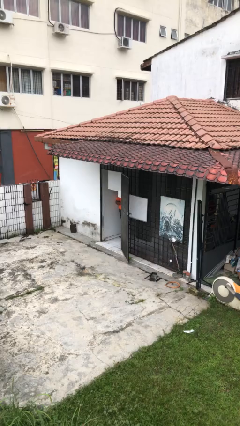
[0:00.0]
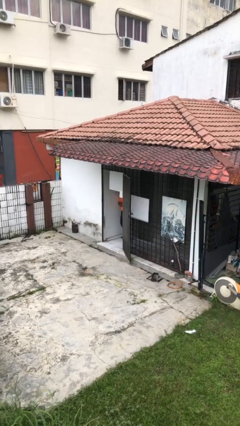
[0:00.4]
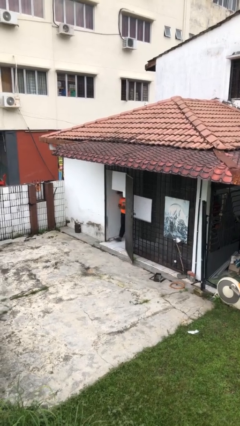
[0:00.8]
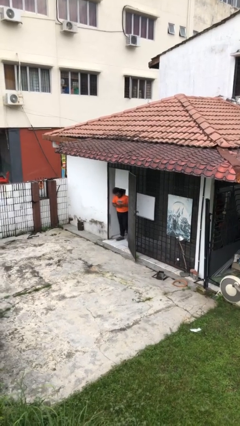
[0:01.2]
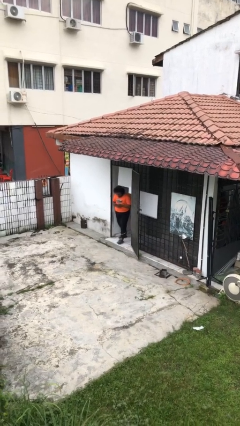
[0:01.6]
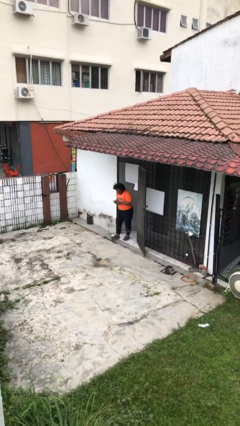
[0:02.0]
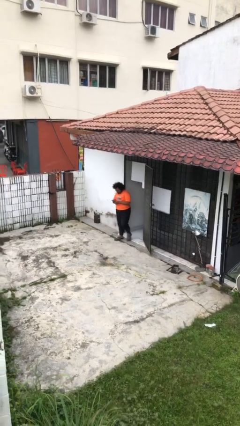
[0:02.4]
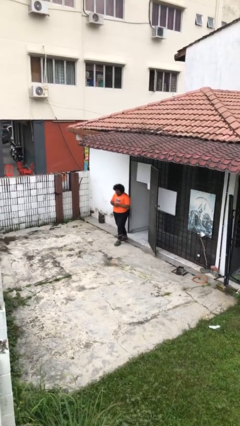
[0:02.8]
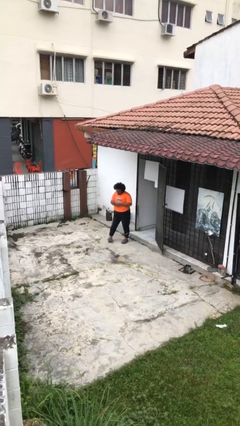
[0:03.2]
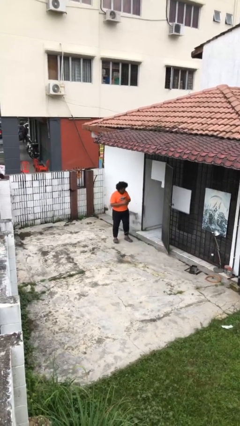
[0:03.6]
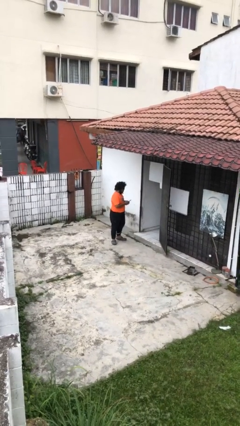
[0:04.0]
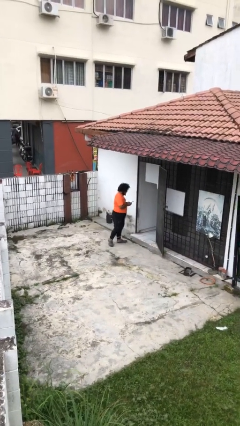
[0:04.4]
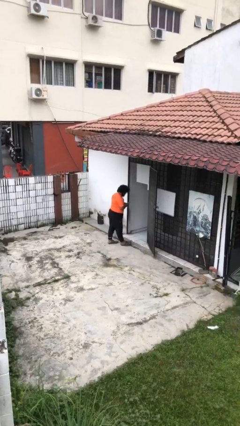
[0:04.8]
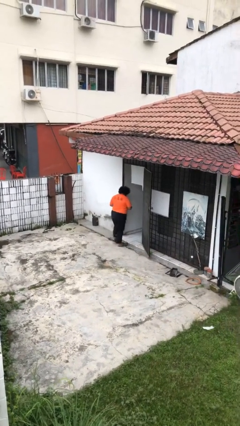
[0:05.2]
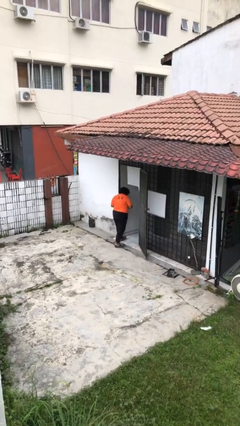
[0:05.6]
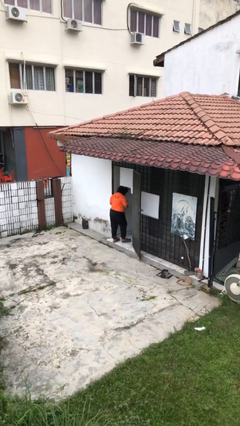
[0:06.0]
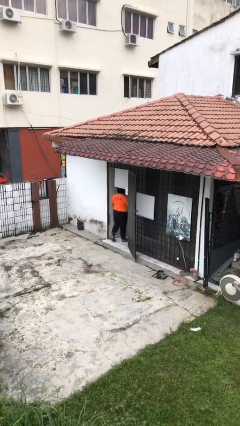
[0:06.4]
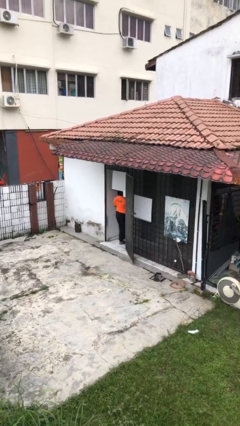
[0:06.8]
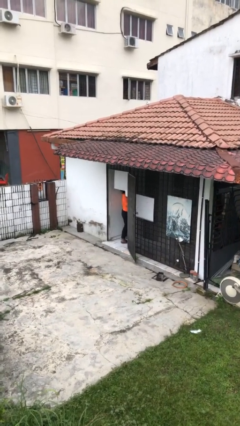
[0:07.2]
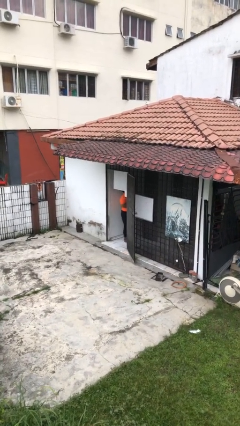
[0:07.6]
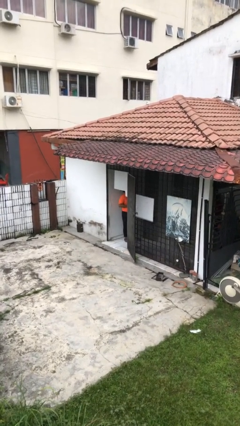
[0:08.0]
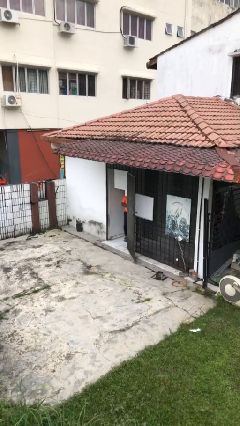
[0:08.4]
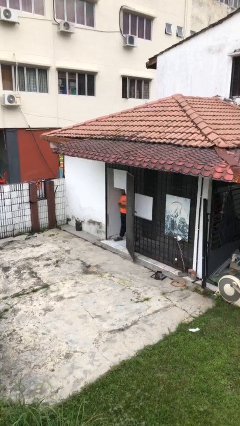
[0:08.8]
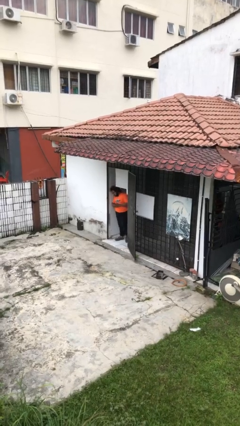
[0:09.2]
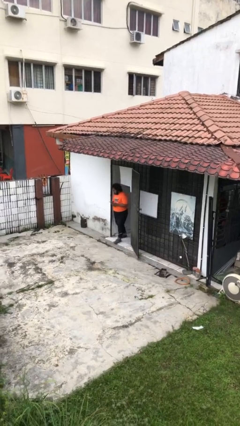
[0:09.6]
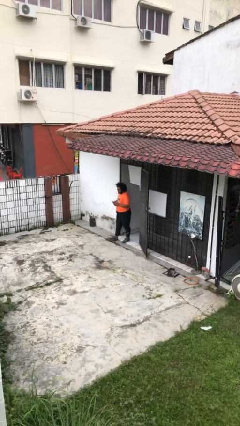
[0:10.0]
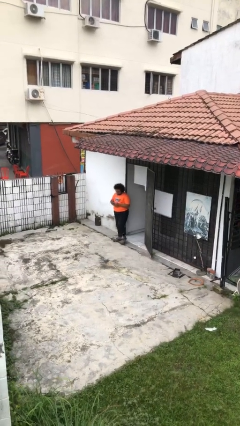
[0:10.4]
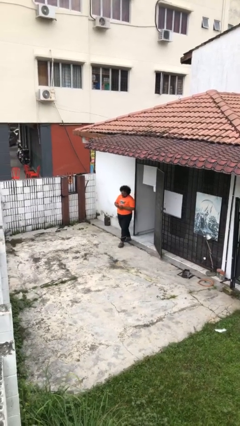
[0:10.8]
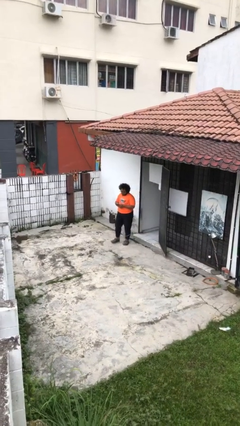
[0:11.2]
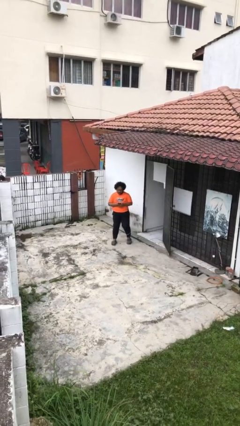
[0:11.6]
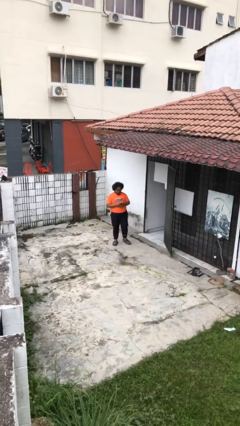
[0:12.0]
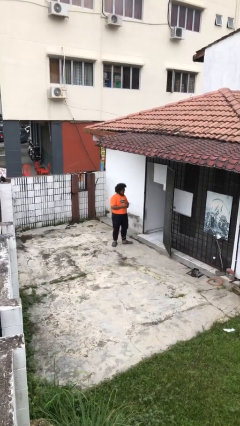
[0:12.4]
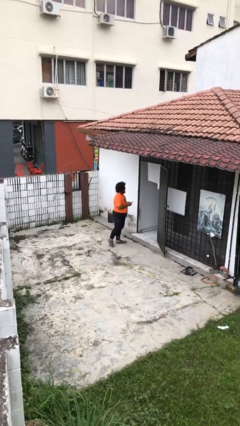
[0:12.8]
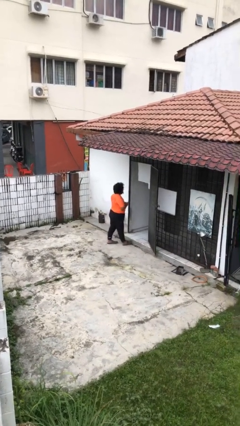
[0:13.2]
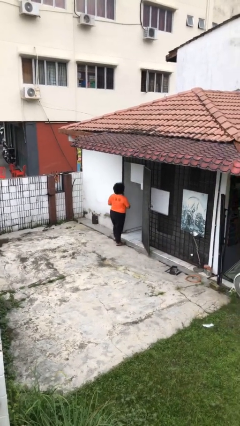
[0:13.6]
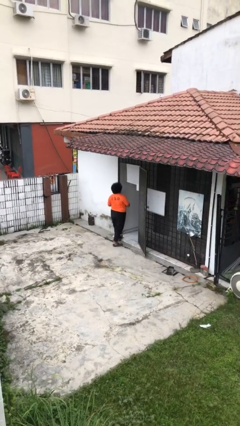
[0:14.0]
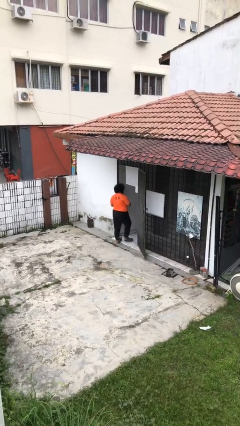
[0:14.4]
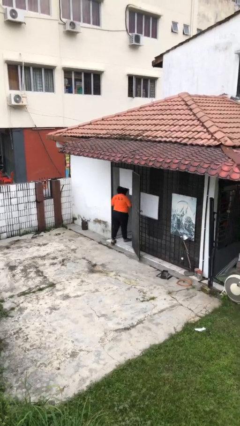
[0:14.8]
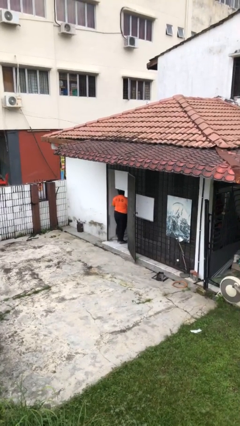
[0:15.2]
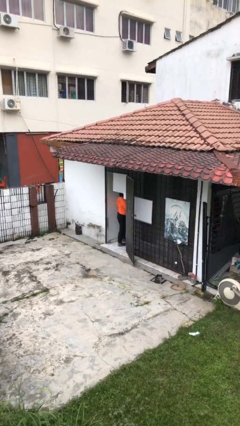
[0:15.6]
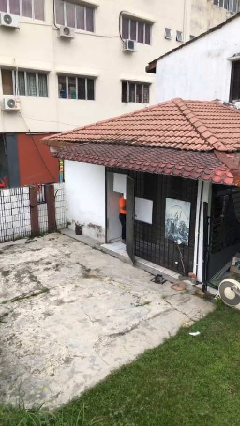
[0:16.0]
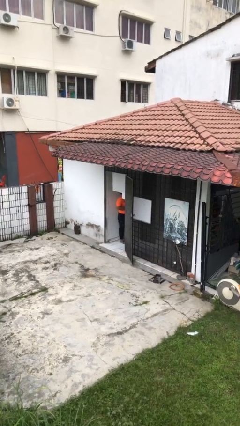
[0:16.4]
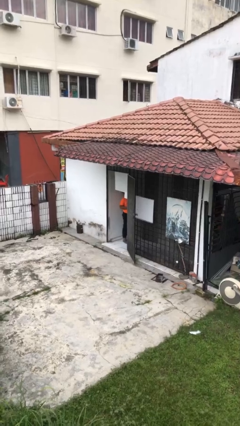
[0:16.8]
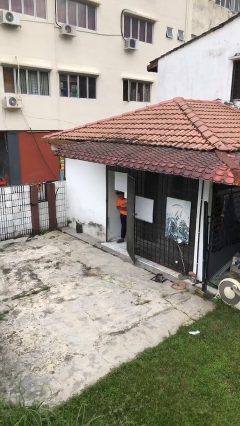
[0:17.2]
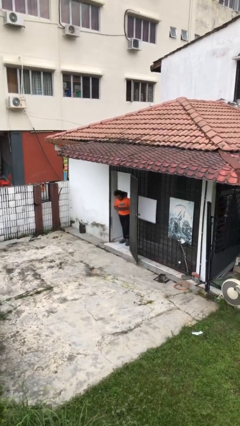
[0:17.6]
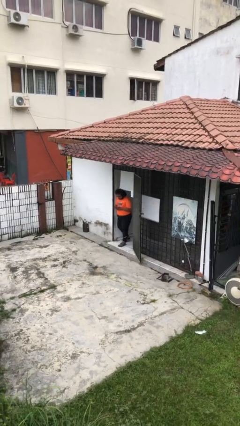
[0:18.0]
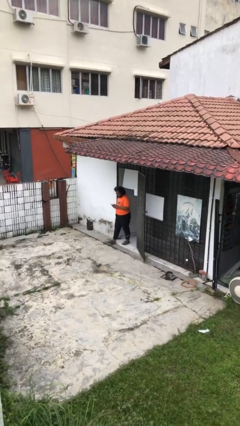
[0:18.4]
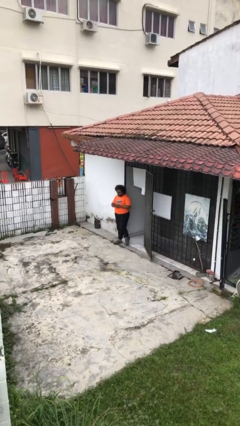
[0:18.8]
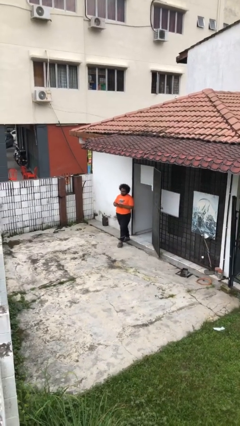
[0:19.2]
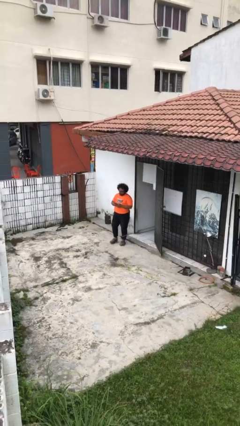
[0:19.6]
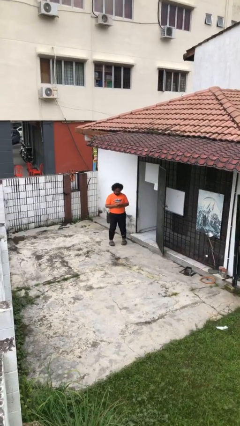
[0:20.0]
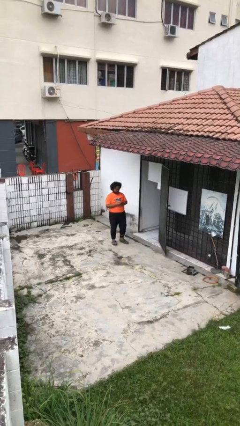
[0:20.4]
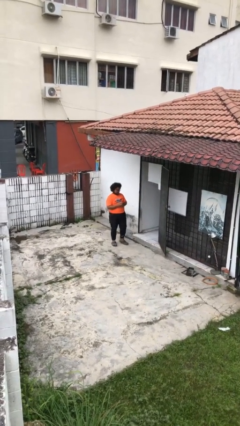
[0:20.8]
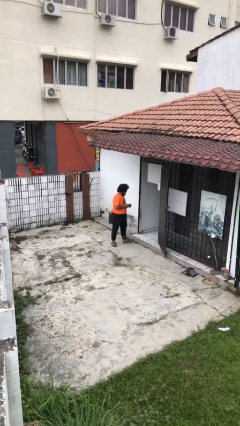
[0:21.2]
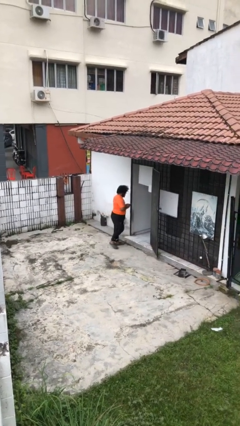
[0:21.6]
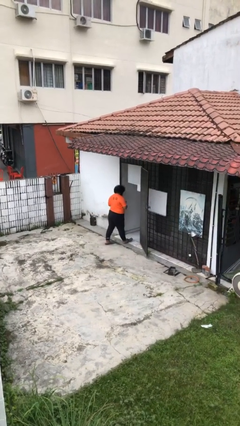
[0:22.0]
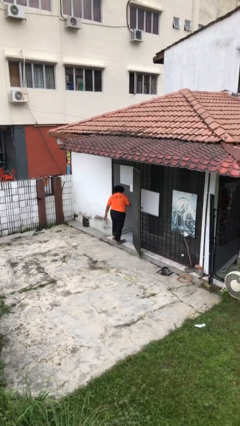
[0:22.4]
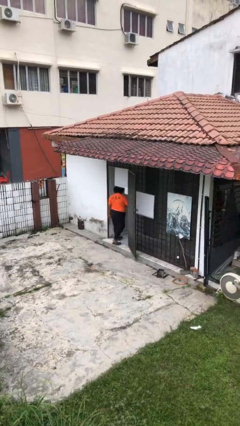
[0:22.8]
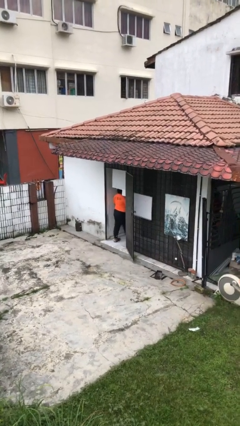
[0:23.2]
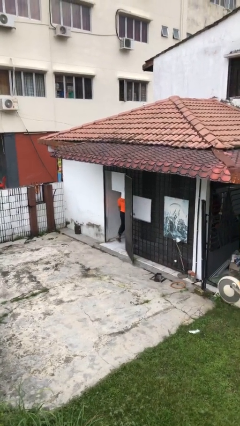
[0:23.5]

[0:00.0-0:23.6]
person texts on phone

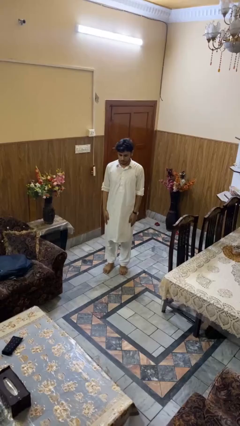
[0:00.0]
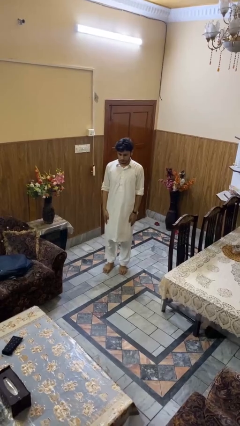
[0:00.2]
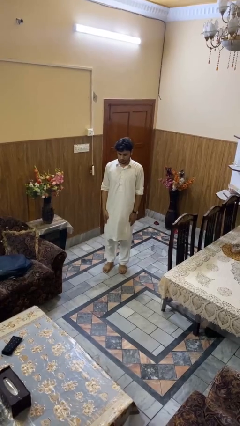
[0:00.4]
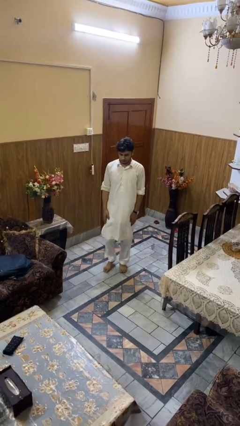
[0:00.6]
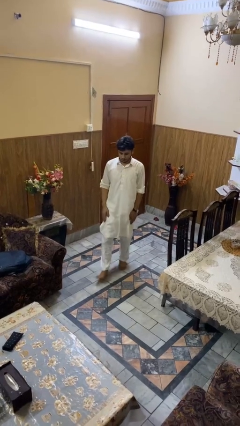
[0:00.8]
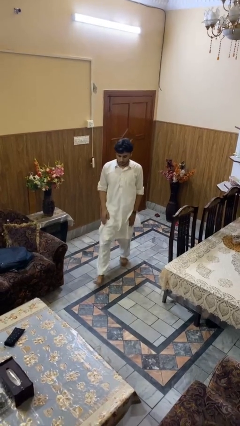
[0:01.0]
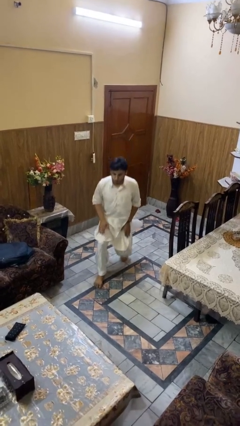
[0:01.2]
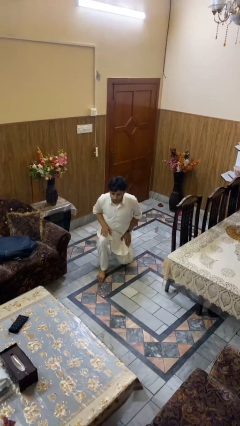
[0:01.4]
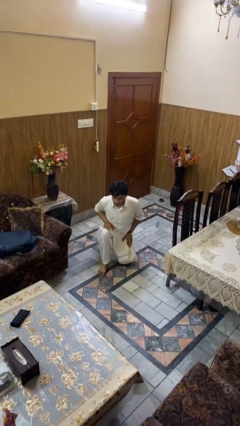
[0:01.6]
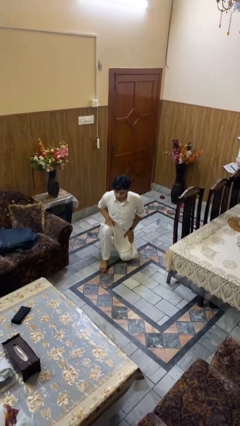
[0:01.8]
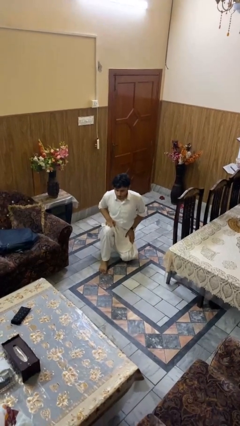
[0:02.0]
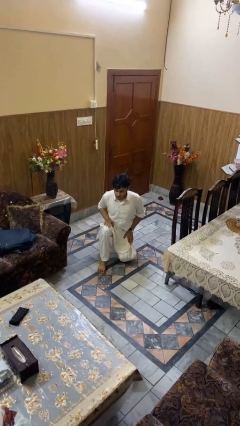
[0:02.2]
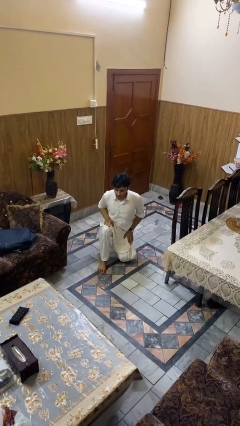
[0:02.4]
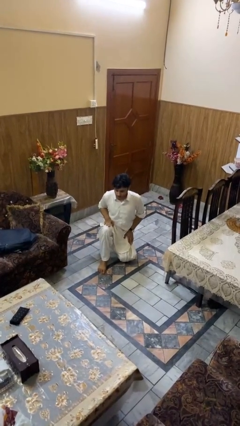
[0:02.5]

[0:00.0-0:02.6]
person kneels

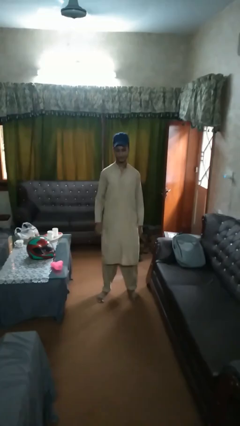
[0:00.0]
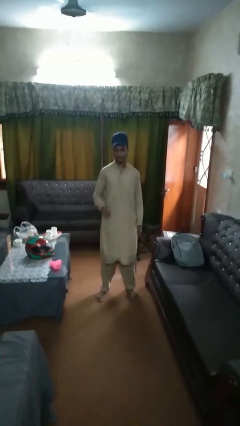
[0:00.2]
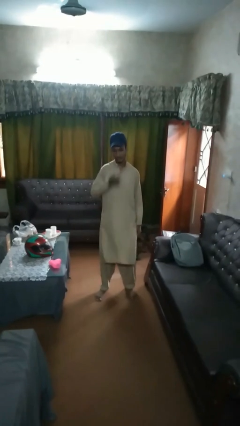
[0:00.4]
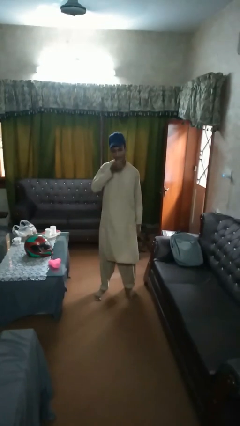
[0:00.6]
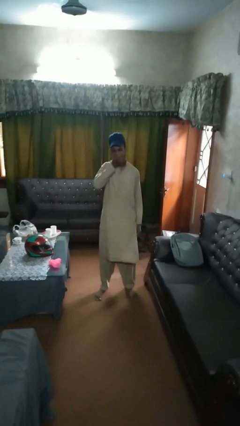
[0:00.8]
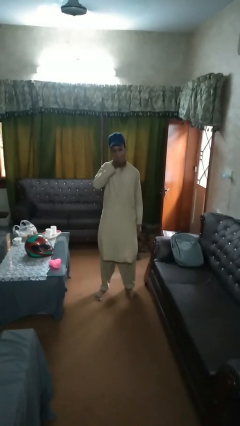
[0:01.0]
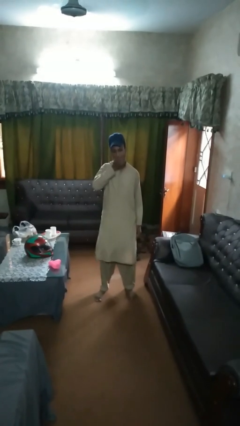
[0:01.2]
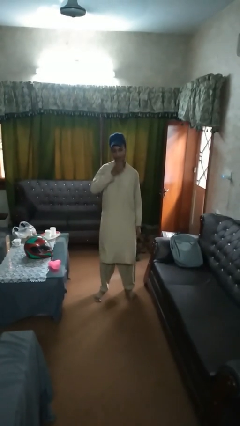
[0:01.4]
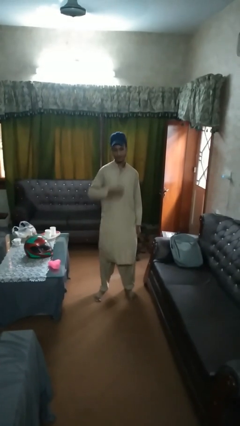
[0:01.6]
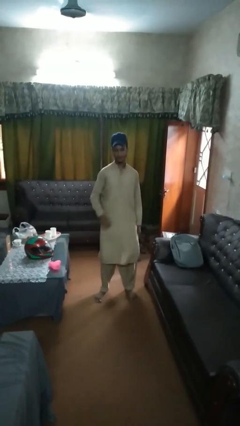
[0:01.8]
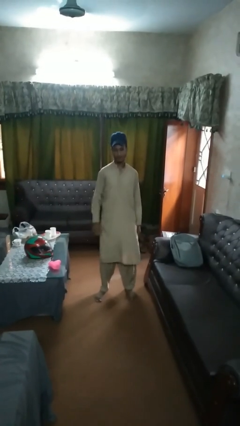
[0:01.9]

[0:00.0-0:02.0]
person eats apple

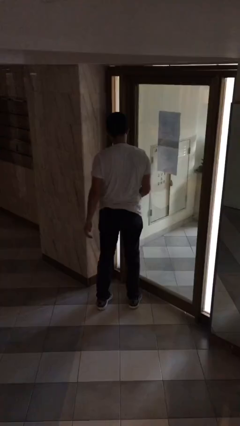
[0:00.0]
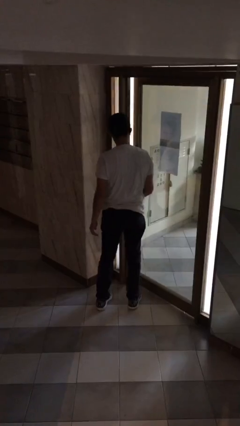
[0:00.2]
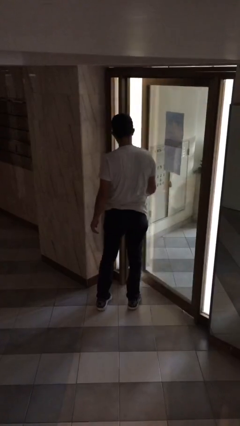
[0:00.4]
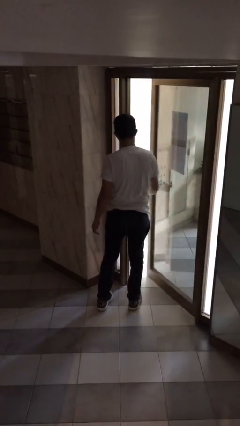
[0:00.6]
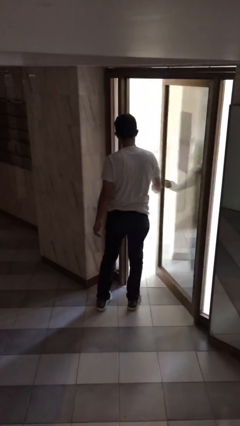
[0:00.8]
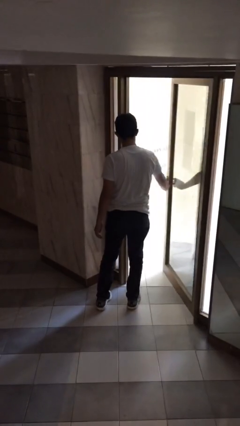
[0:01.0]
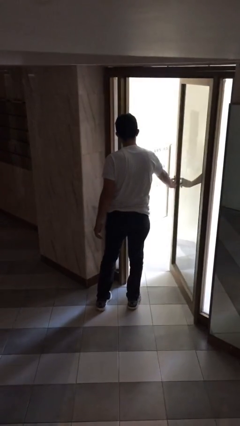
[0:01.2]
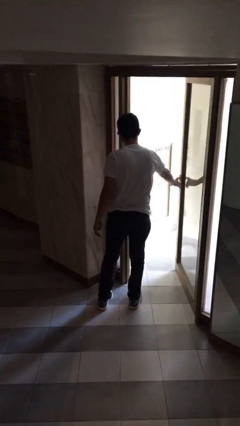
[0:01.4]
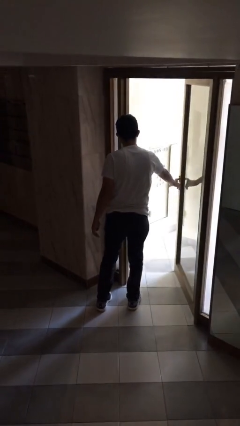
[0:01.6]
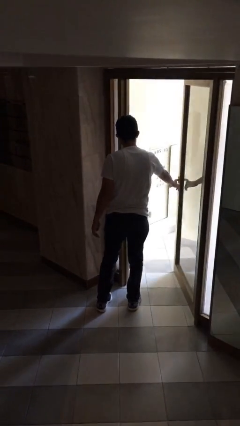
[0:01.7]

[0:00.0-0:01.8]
person opens facility door
